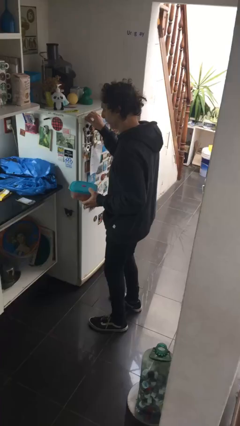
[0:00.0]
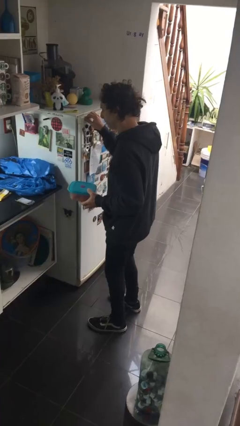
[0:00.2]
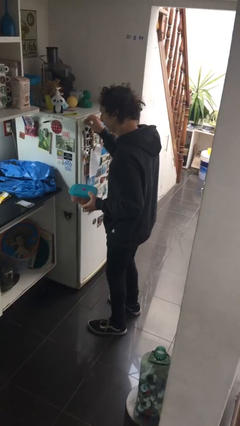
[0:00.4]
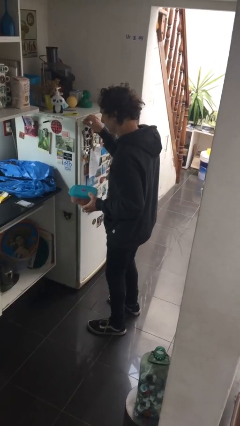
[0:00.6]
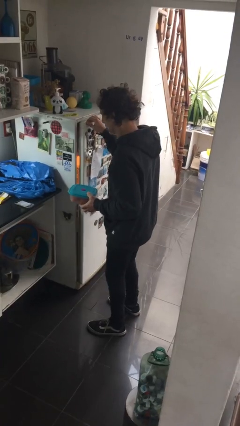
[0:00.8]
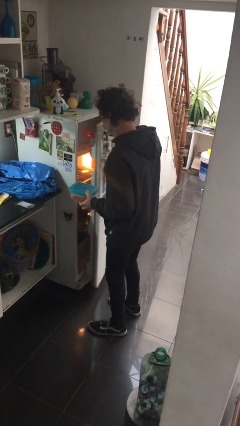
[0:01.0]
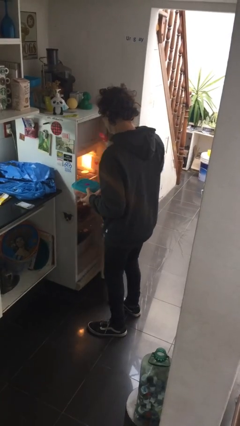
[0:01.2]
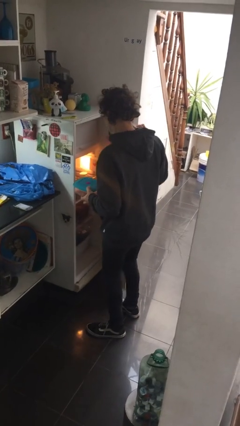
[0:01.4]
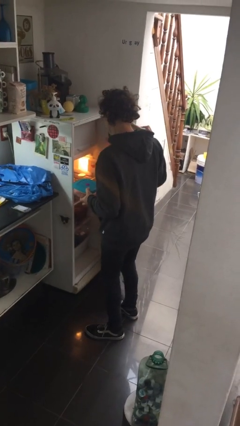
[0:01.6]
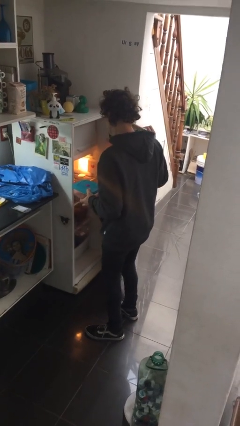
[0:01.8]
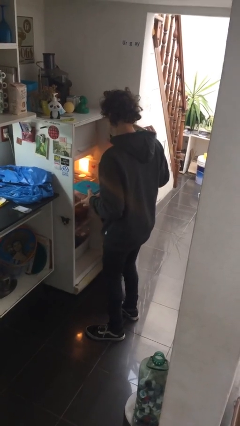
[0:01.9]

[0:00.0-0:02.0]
person opens refrigerator

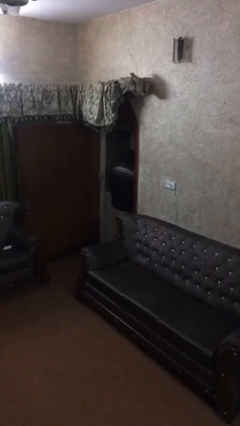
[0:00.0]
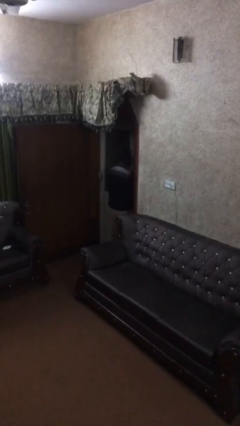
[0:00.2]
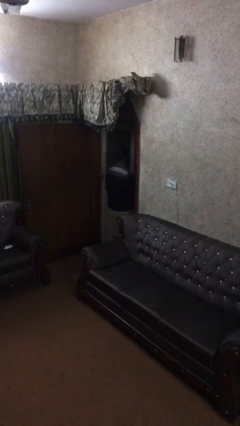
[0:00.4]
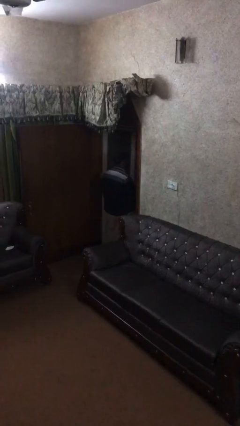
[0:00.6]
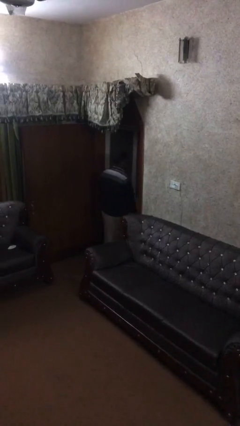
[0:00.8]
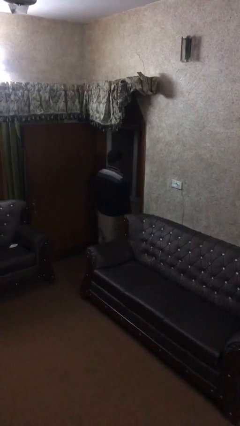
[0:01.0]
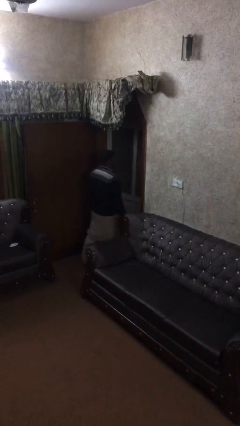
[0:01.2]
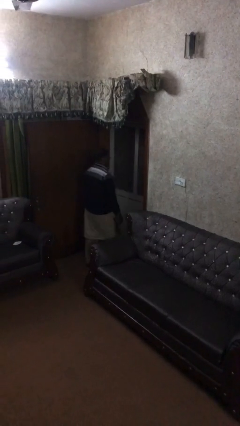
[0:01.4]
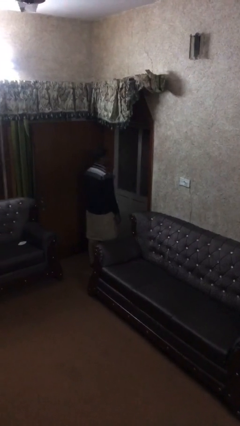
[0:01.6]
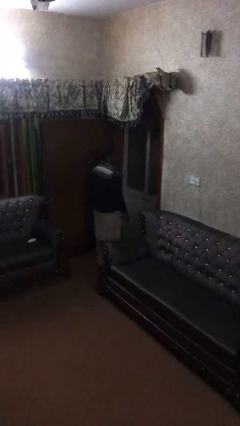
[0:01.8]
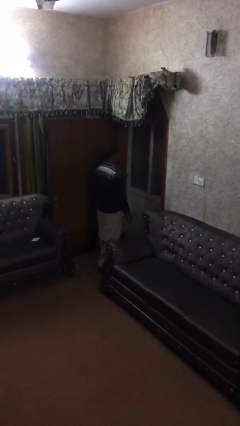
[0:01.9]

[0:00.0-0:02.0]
person closes facility door

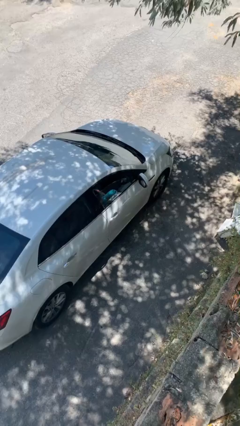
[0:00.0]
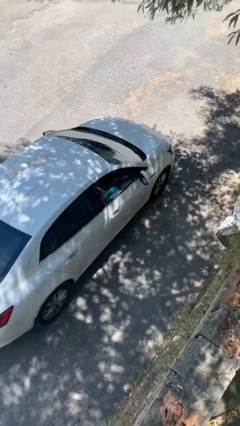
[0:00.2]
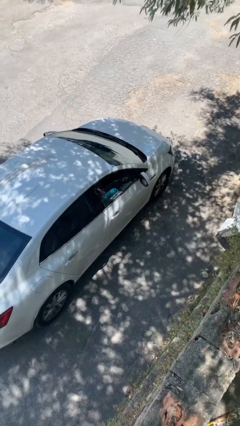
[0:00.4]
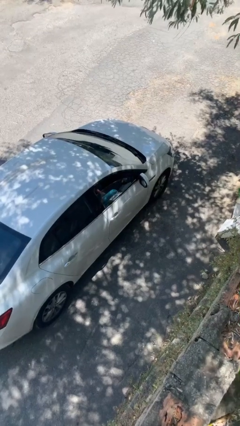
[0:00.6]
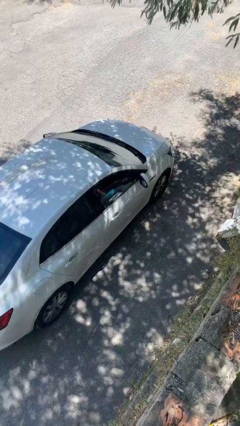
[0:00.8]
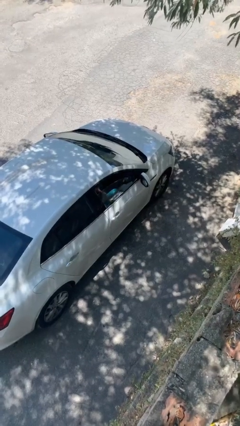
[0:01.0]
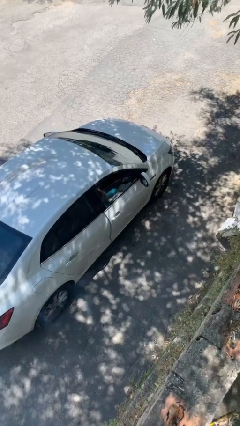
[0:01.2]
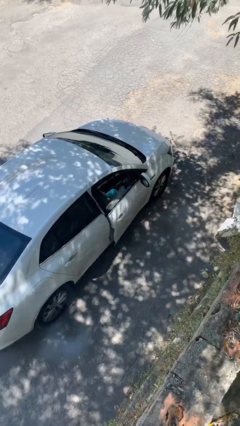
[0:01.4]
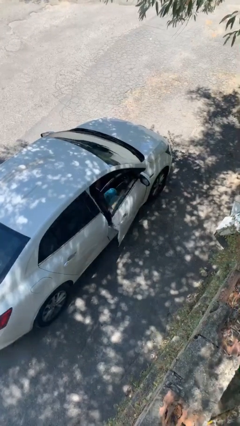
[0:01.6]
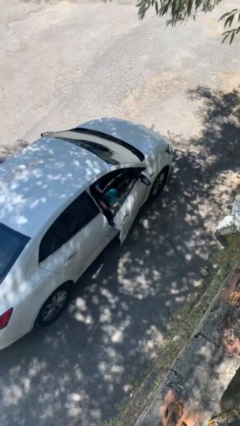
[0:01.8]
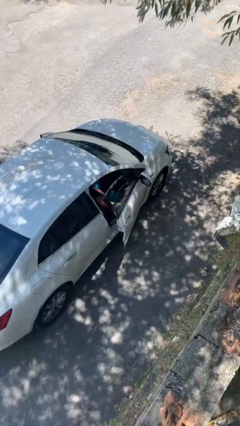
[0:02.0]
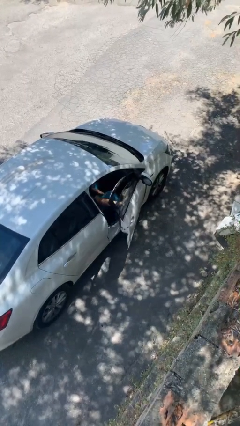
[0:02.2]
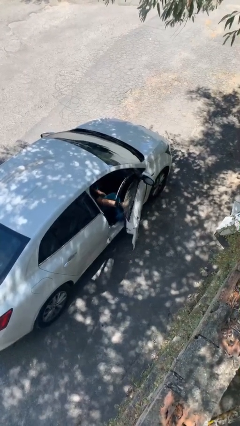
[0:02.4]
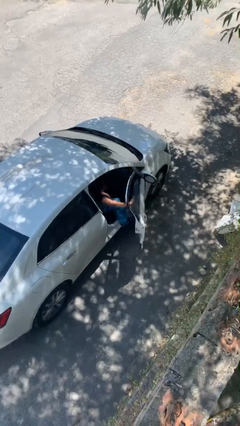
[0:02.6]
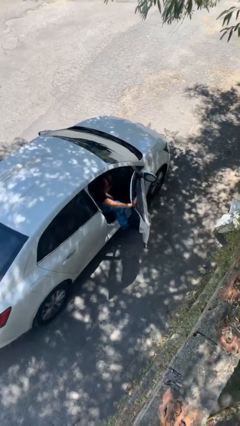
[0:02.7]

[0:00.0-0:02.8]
person opens car door

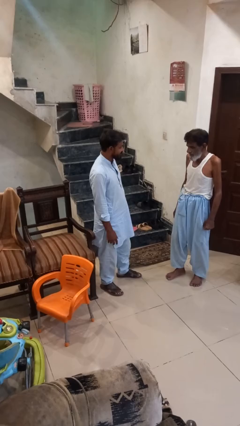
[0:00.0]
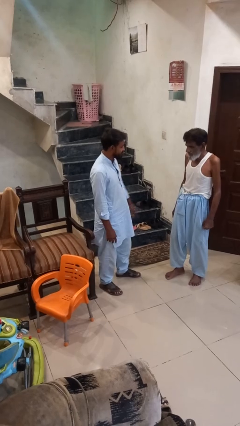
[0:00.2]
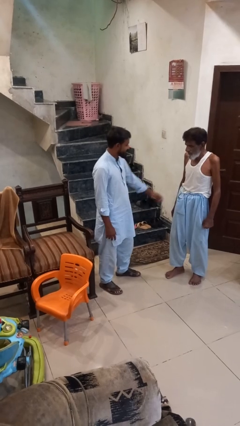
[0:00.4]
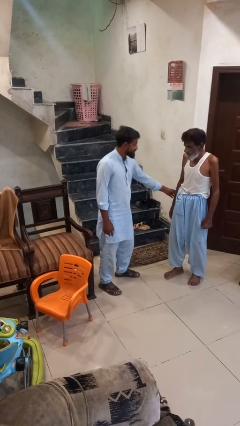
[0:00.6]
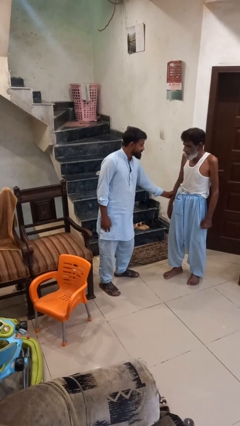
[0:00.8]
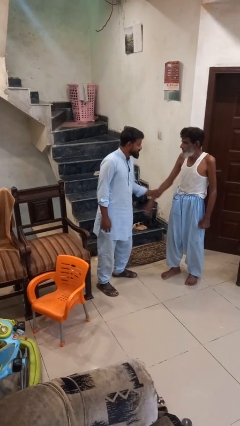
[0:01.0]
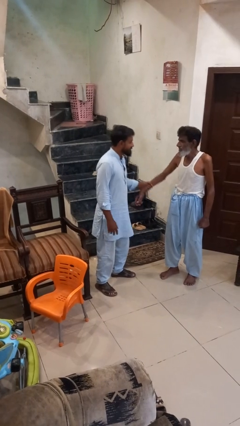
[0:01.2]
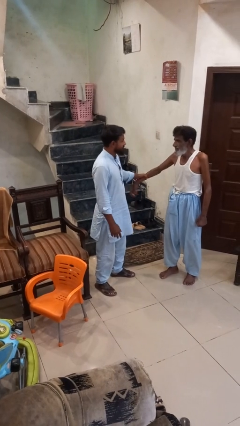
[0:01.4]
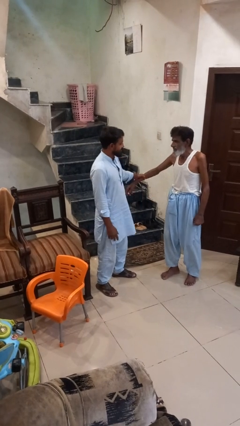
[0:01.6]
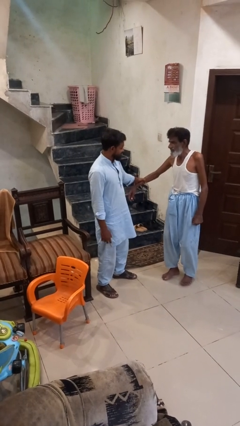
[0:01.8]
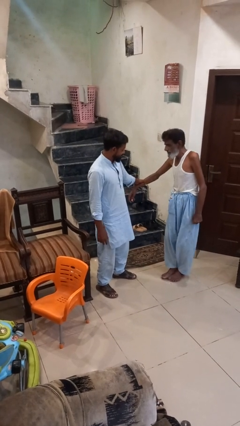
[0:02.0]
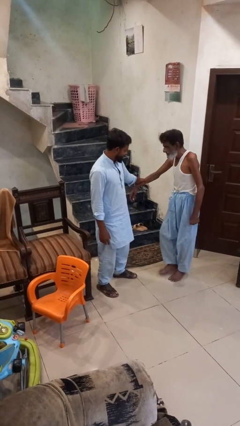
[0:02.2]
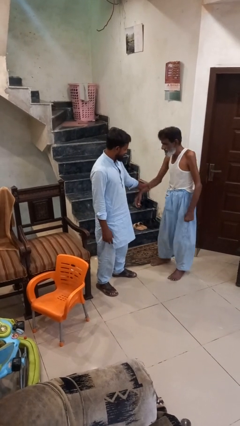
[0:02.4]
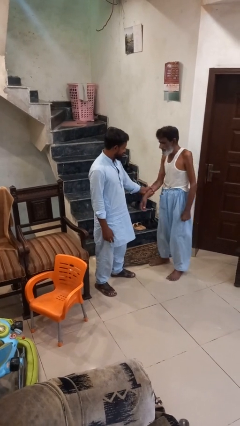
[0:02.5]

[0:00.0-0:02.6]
person grabs person by forearm

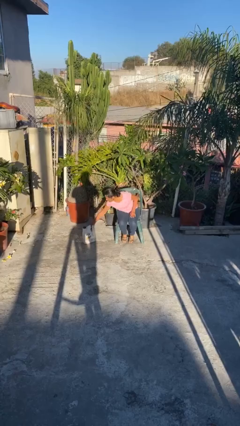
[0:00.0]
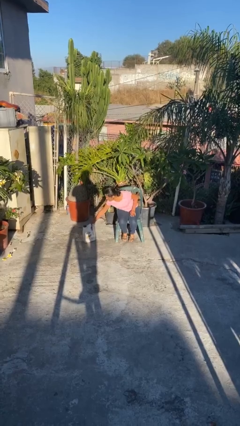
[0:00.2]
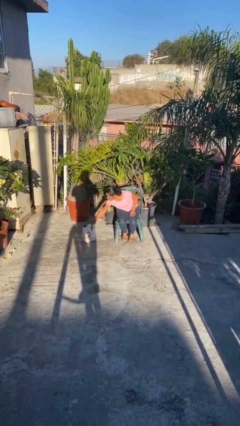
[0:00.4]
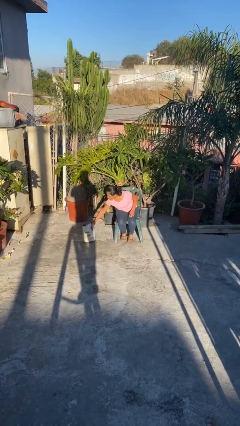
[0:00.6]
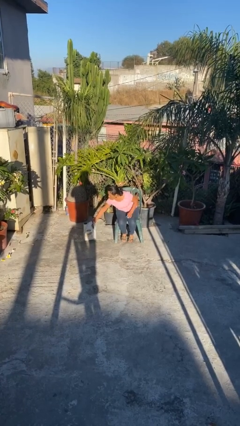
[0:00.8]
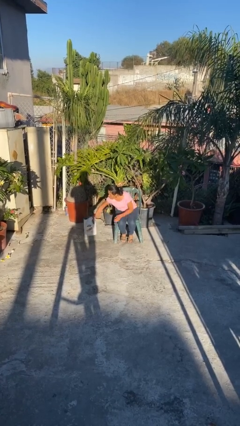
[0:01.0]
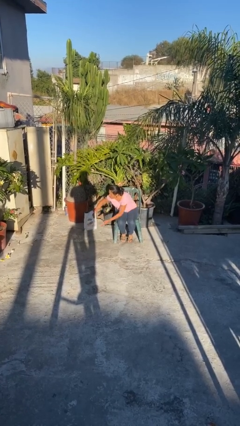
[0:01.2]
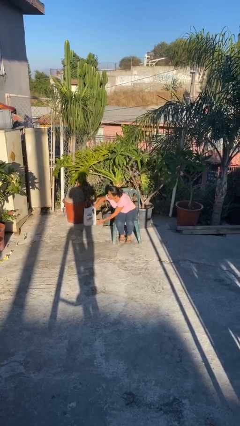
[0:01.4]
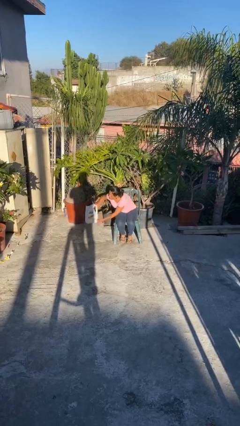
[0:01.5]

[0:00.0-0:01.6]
person picks up object from floor

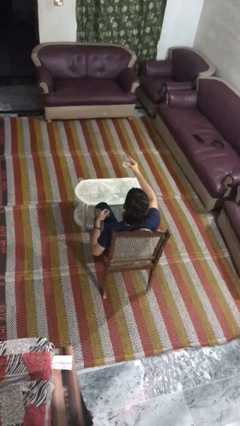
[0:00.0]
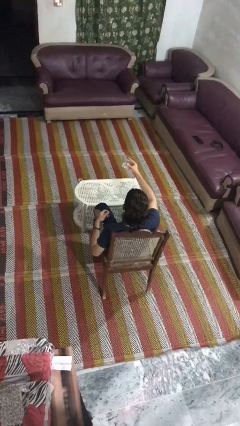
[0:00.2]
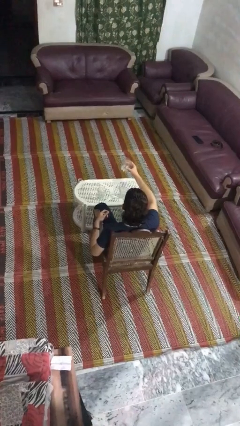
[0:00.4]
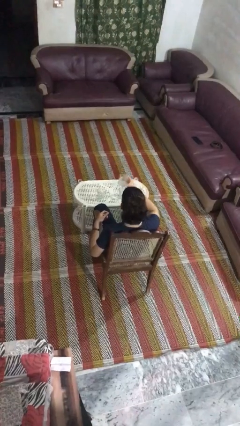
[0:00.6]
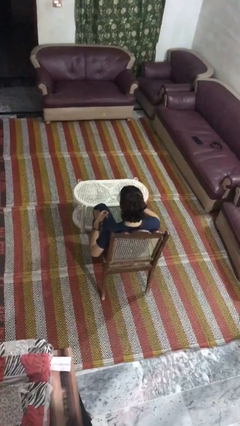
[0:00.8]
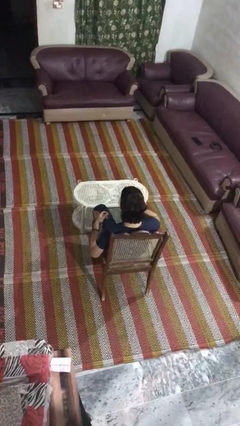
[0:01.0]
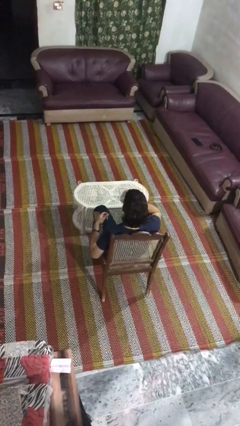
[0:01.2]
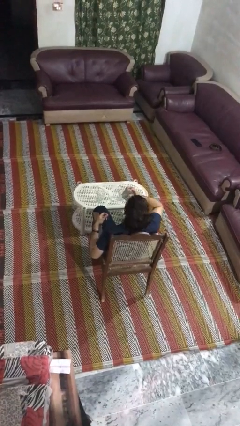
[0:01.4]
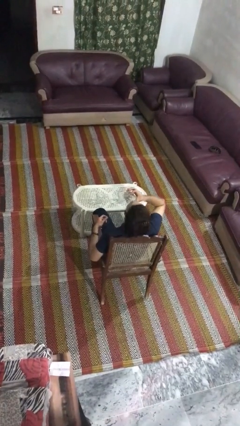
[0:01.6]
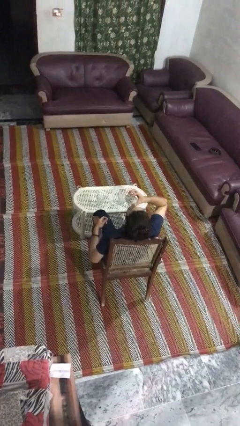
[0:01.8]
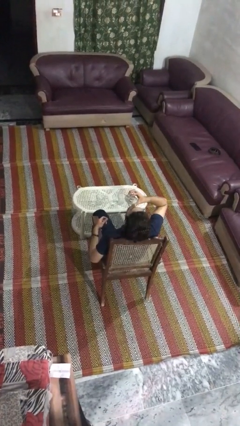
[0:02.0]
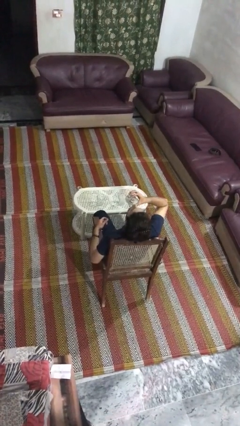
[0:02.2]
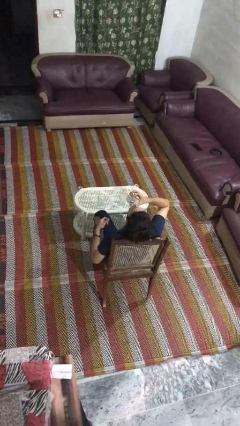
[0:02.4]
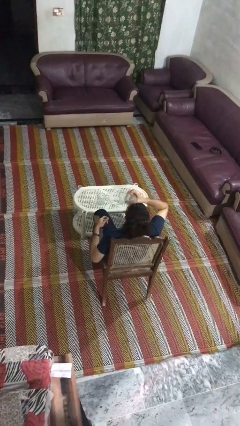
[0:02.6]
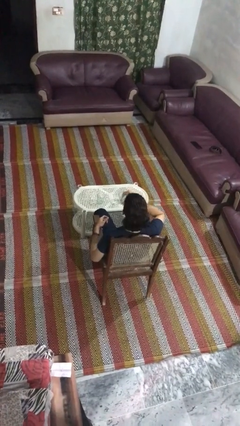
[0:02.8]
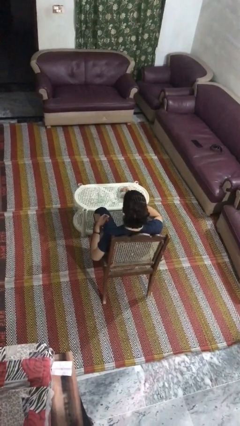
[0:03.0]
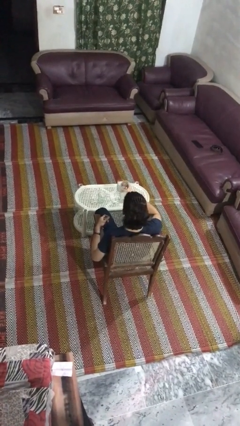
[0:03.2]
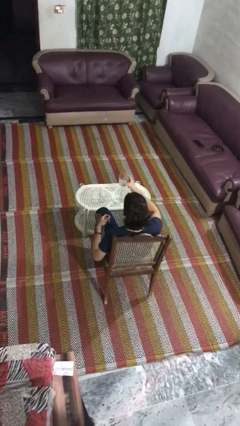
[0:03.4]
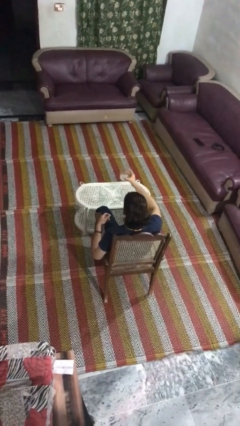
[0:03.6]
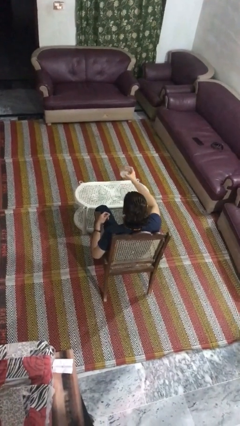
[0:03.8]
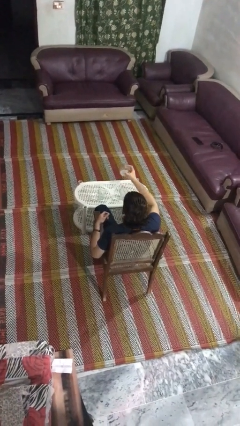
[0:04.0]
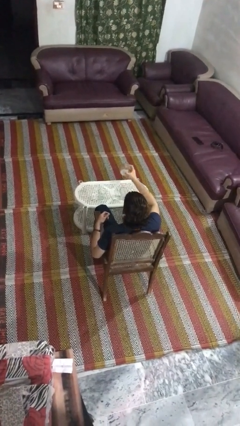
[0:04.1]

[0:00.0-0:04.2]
person drinks from shotglass

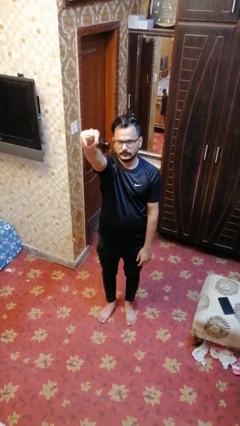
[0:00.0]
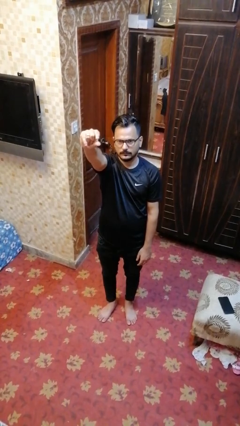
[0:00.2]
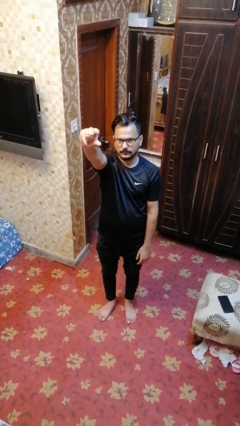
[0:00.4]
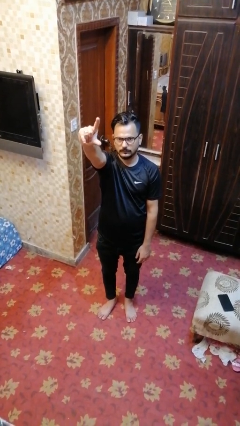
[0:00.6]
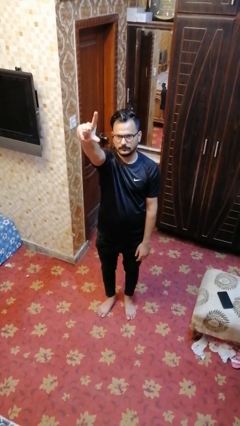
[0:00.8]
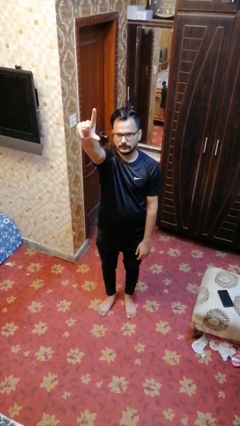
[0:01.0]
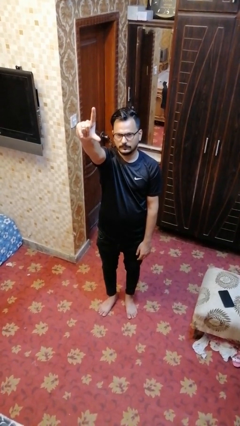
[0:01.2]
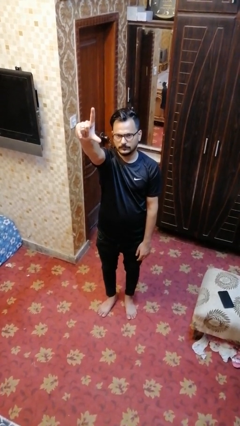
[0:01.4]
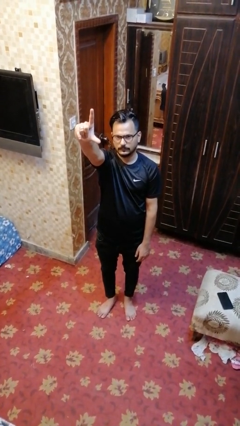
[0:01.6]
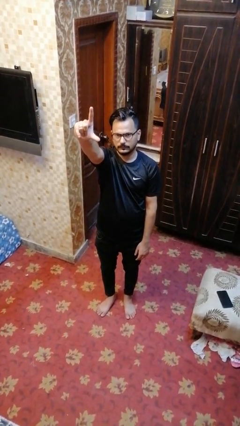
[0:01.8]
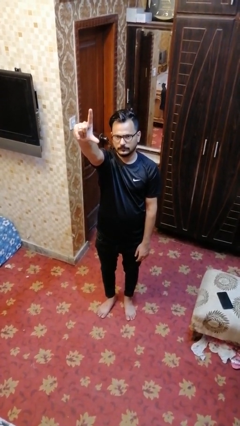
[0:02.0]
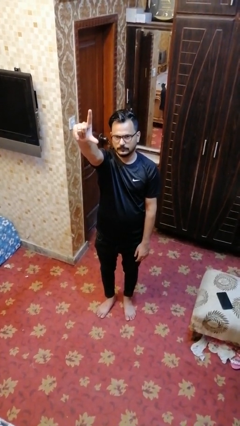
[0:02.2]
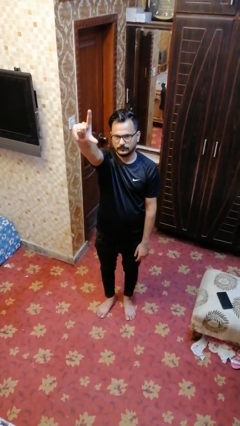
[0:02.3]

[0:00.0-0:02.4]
person gestures zoom out
